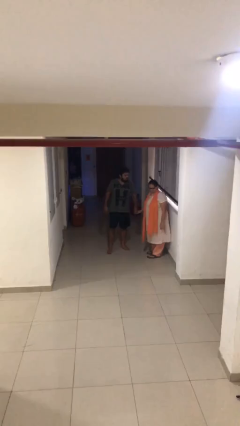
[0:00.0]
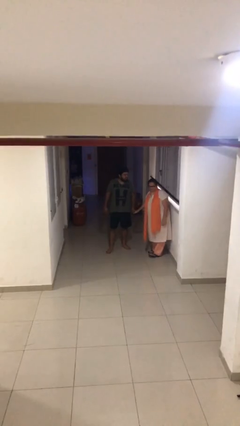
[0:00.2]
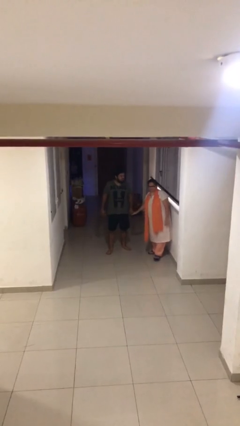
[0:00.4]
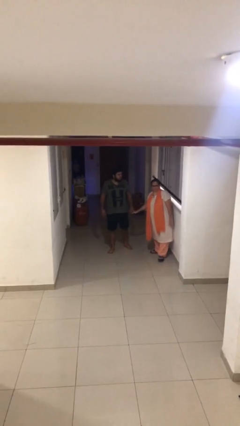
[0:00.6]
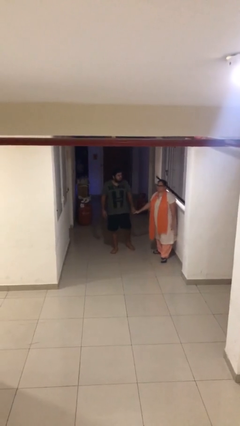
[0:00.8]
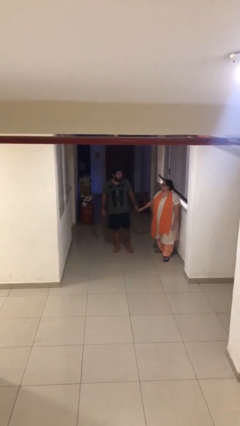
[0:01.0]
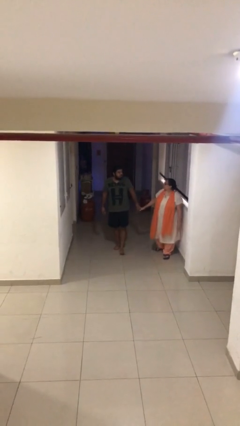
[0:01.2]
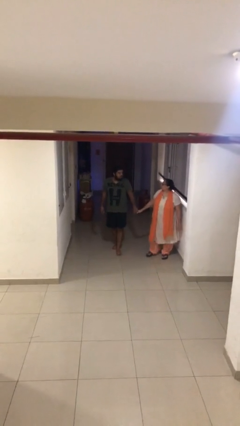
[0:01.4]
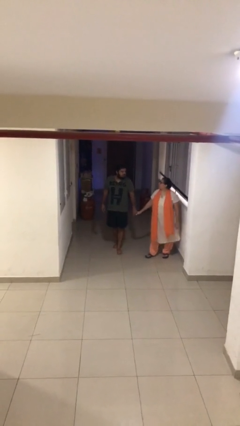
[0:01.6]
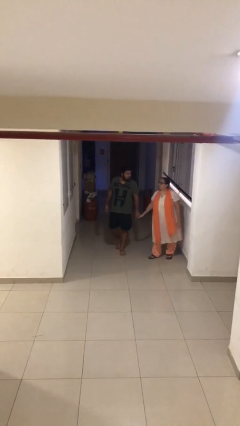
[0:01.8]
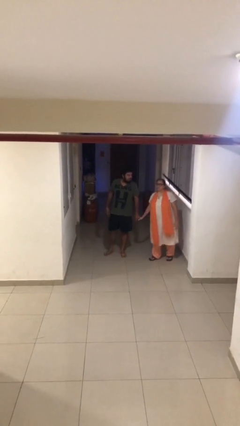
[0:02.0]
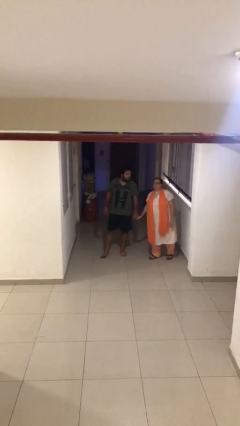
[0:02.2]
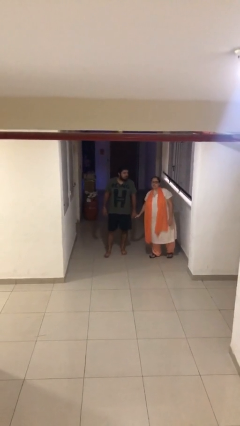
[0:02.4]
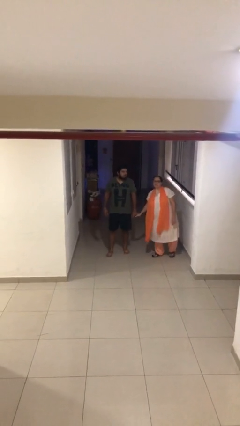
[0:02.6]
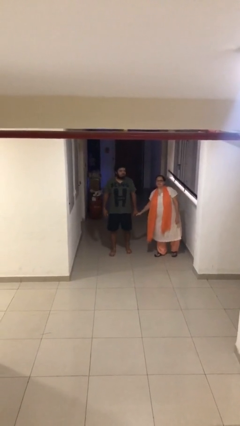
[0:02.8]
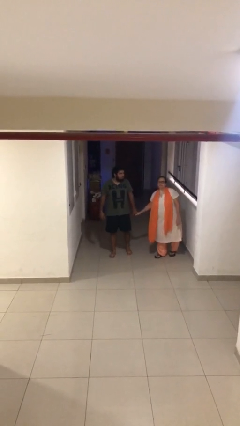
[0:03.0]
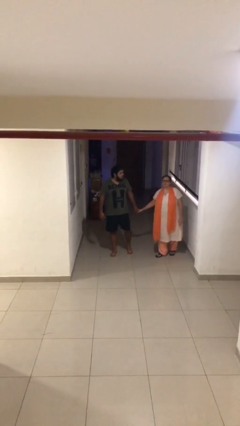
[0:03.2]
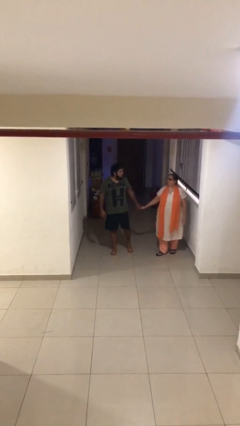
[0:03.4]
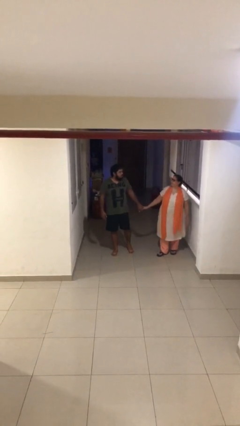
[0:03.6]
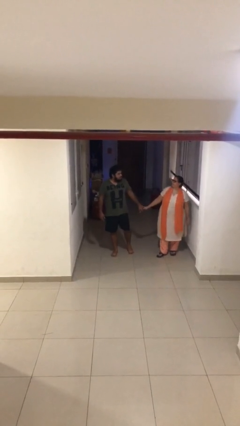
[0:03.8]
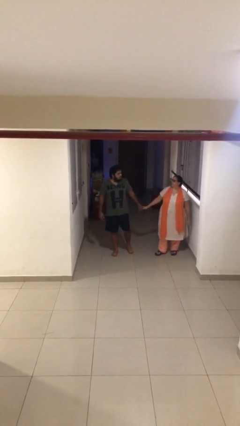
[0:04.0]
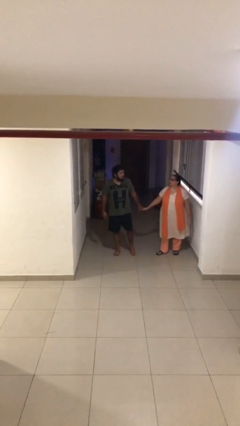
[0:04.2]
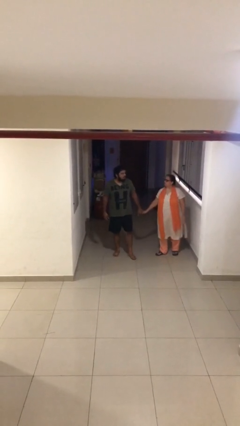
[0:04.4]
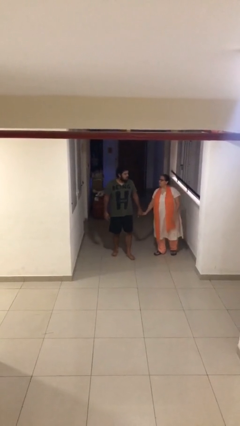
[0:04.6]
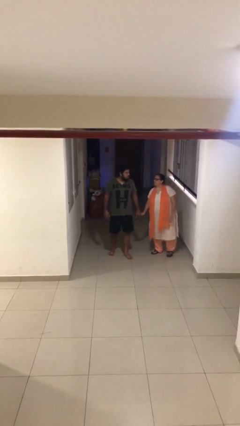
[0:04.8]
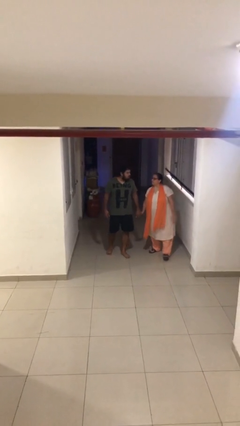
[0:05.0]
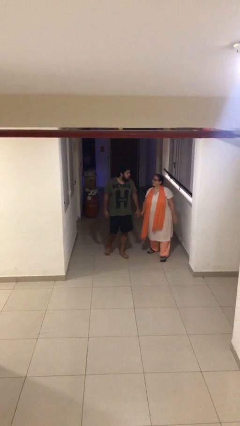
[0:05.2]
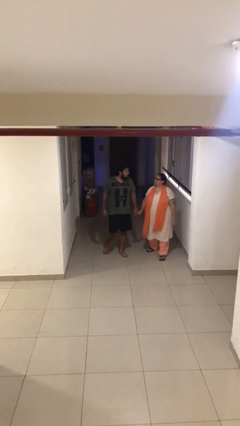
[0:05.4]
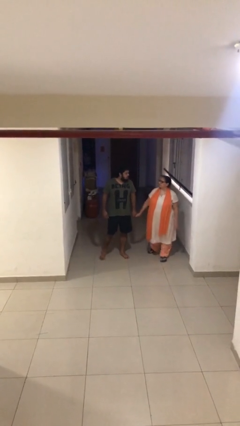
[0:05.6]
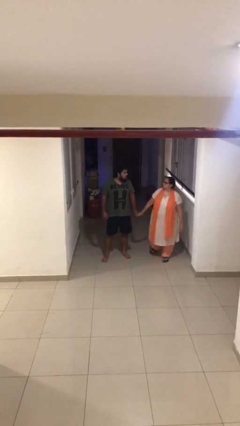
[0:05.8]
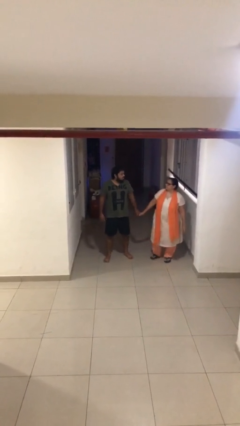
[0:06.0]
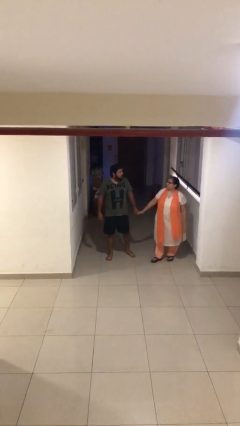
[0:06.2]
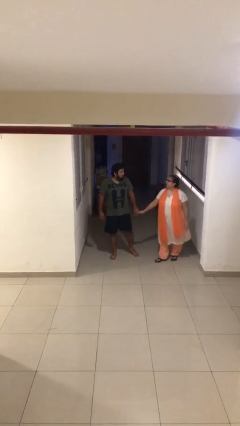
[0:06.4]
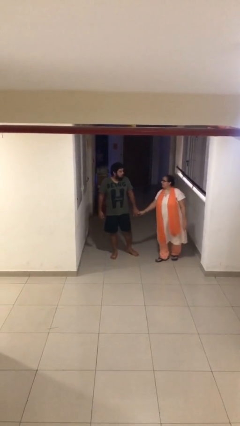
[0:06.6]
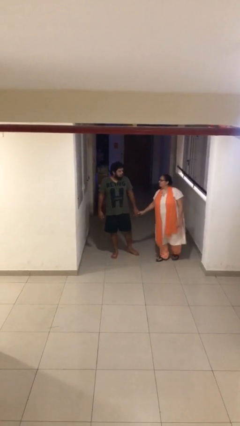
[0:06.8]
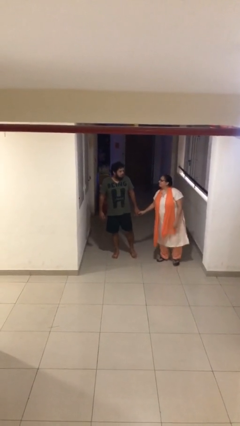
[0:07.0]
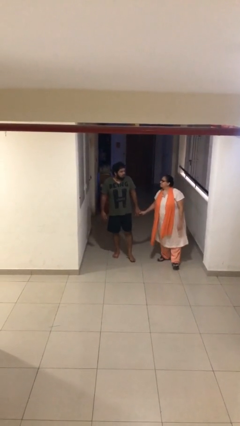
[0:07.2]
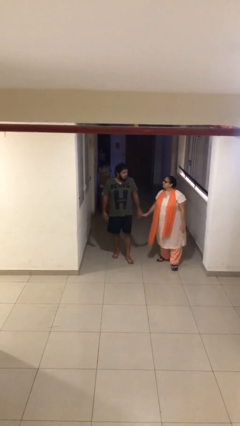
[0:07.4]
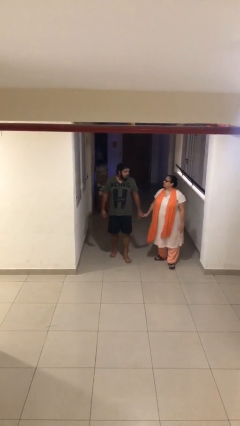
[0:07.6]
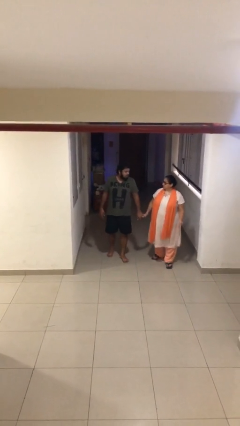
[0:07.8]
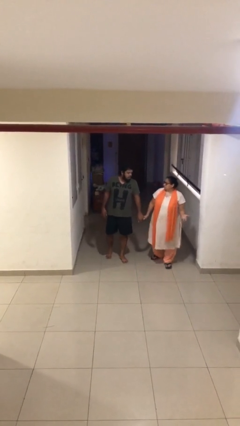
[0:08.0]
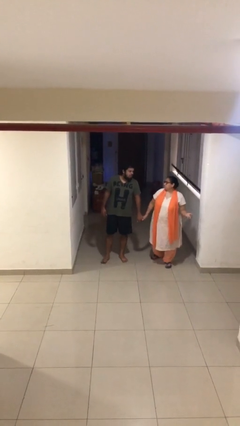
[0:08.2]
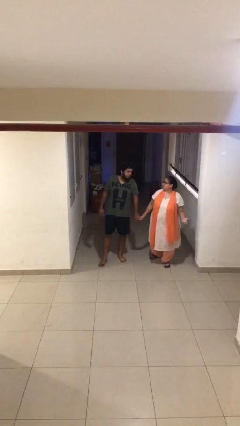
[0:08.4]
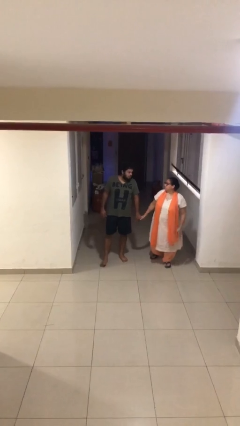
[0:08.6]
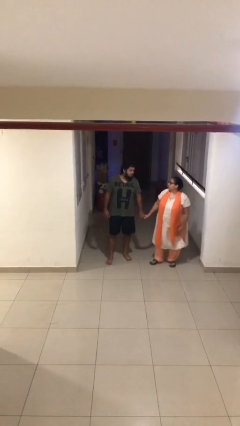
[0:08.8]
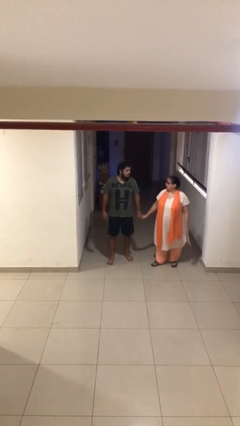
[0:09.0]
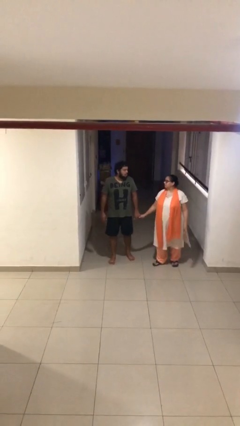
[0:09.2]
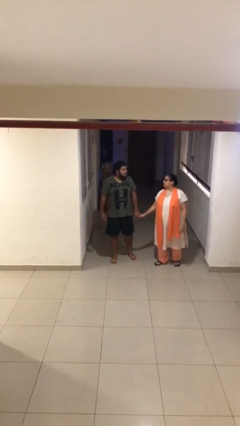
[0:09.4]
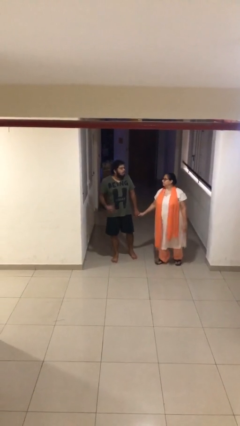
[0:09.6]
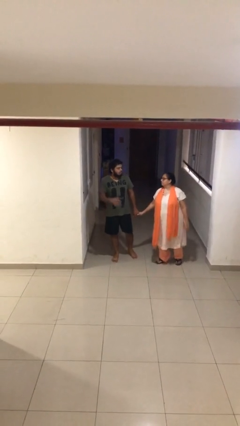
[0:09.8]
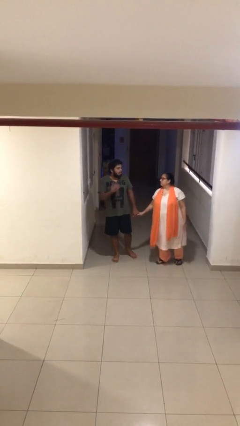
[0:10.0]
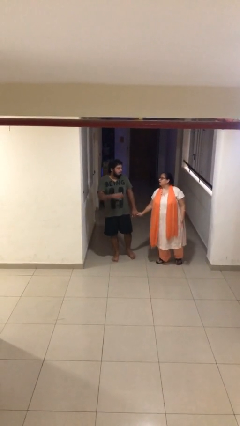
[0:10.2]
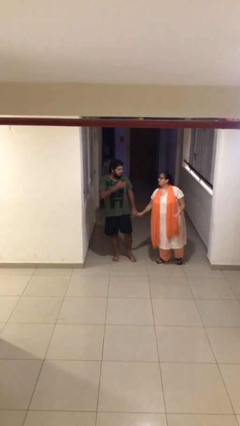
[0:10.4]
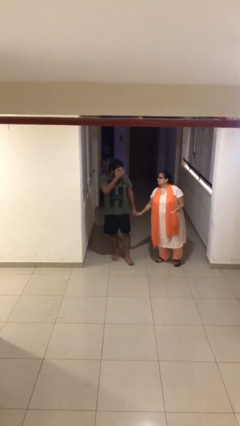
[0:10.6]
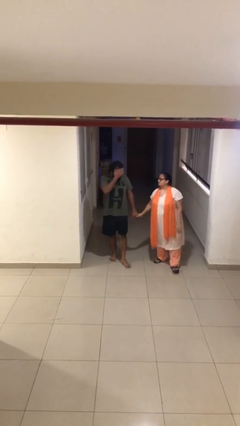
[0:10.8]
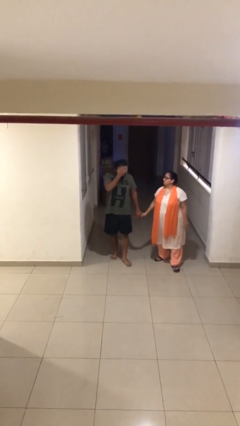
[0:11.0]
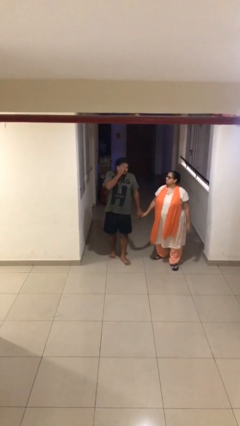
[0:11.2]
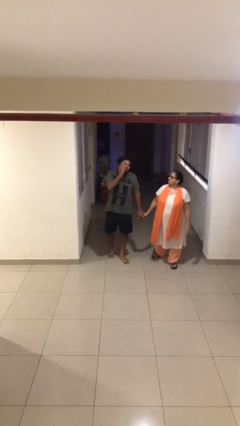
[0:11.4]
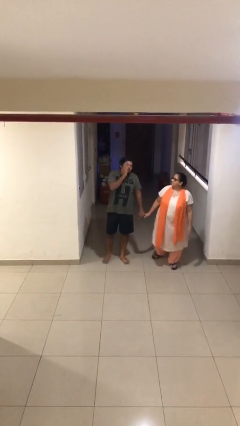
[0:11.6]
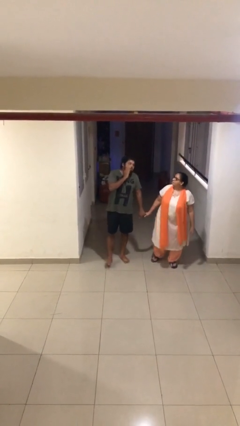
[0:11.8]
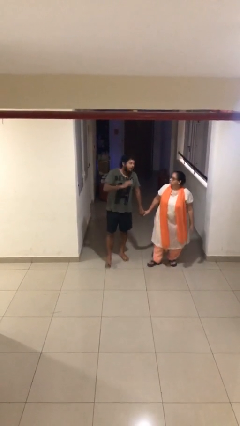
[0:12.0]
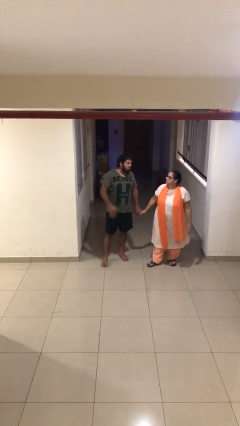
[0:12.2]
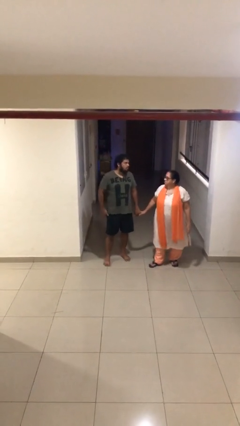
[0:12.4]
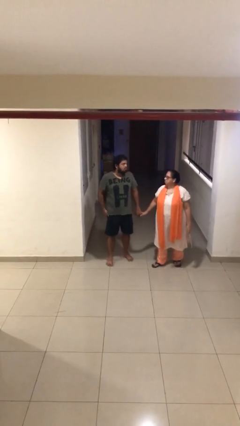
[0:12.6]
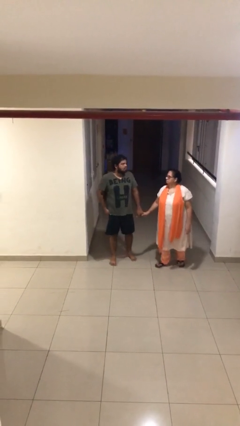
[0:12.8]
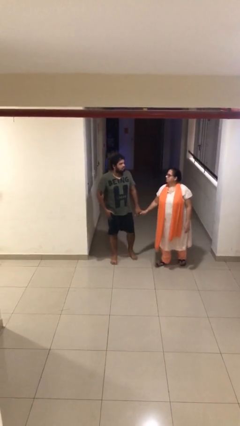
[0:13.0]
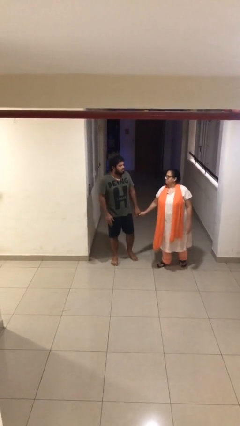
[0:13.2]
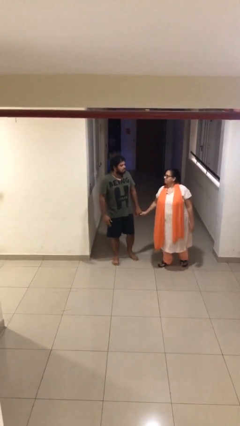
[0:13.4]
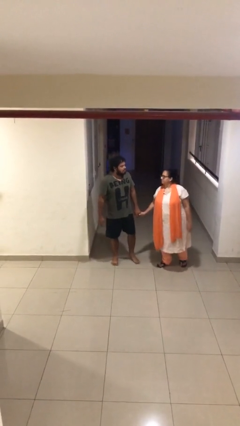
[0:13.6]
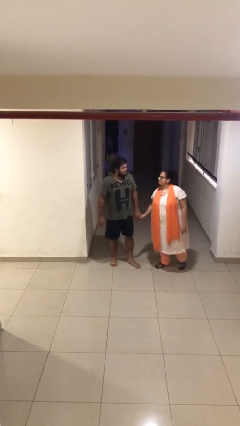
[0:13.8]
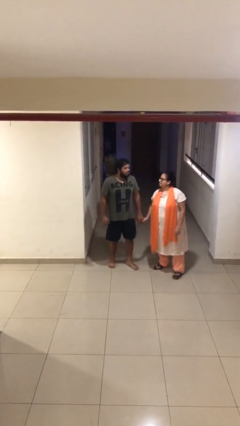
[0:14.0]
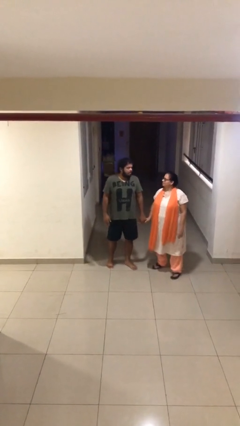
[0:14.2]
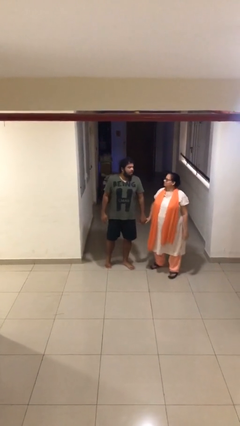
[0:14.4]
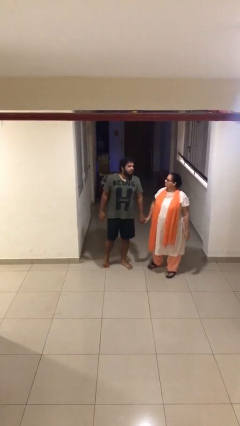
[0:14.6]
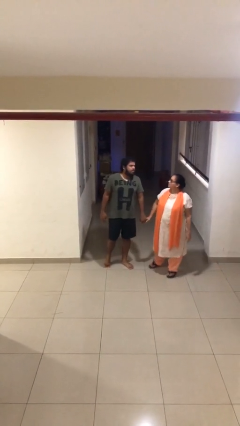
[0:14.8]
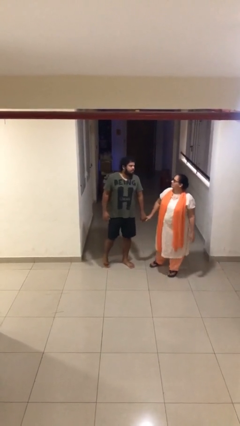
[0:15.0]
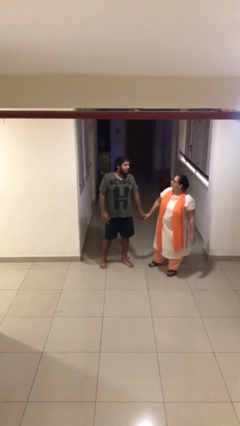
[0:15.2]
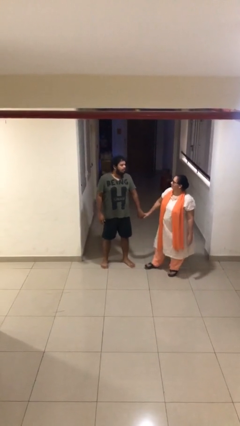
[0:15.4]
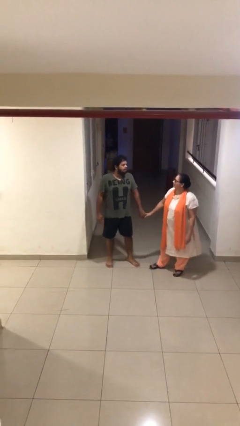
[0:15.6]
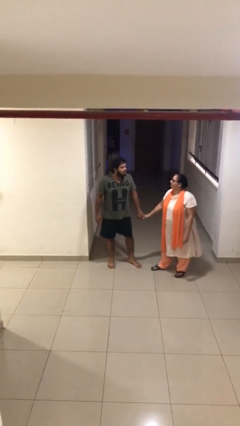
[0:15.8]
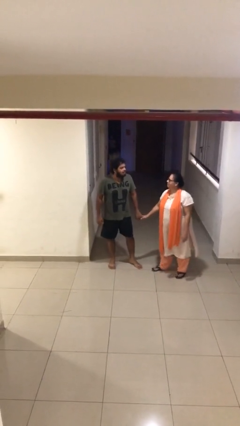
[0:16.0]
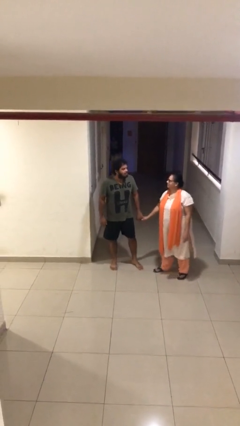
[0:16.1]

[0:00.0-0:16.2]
person holds hand

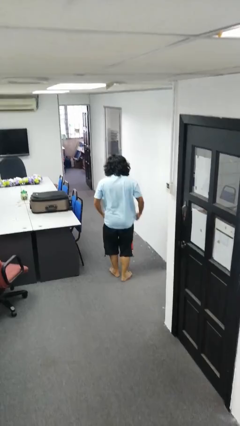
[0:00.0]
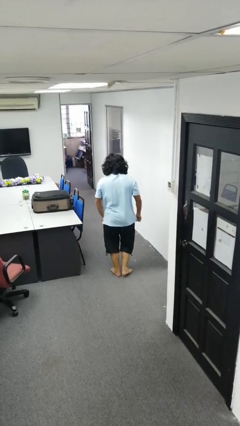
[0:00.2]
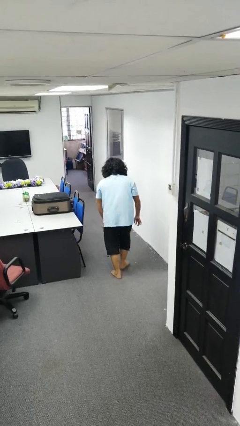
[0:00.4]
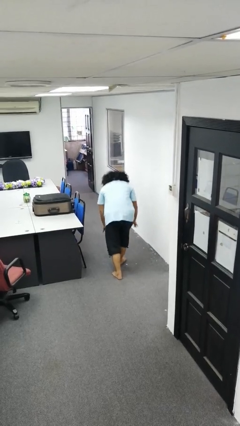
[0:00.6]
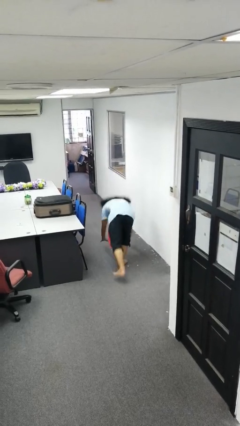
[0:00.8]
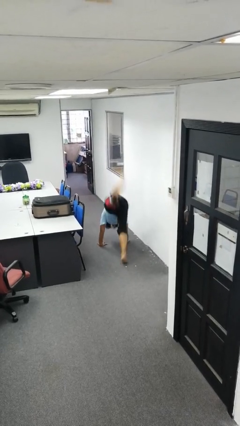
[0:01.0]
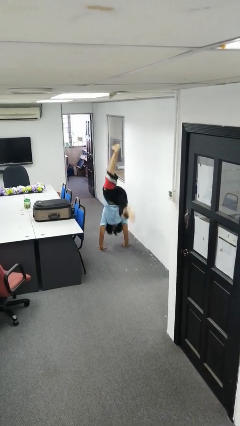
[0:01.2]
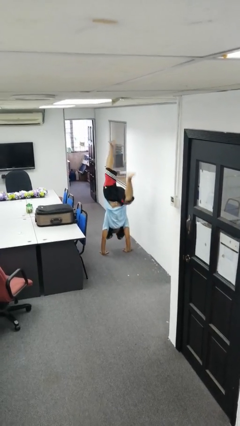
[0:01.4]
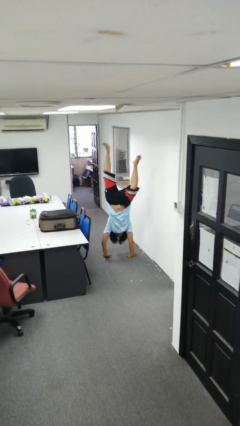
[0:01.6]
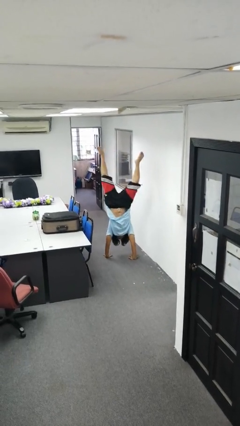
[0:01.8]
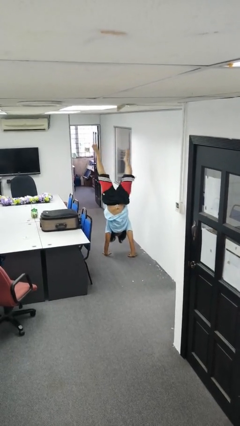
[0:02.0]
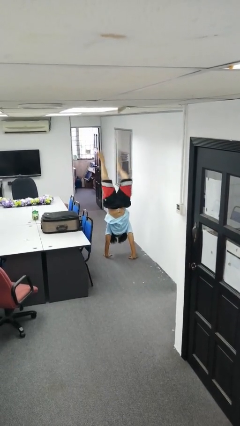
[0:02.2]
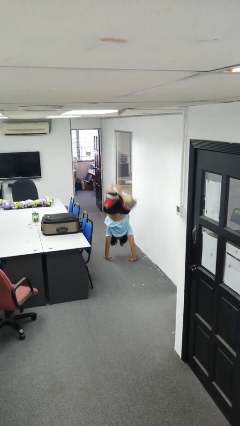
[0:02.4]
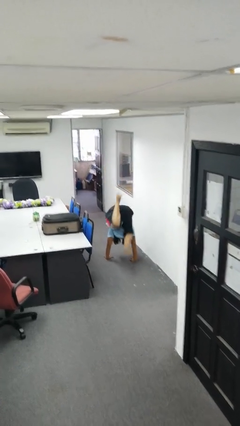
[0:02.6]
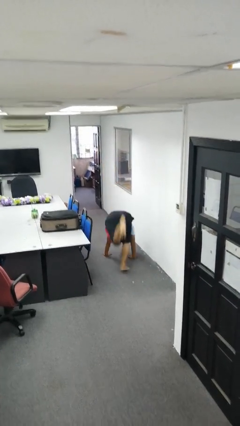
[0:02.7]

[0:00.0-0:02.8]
person handstand
